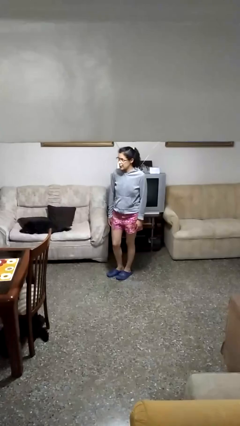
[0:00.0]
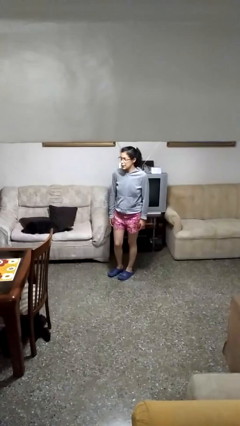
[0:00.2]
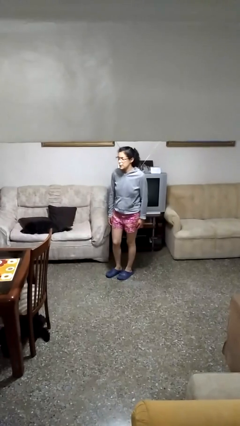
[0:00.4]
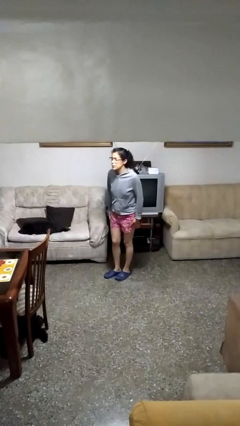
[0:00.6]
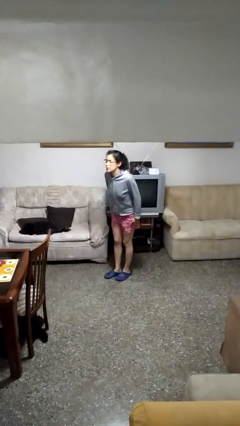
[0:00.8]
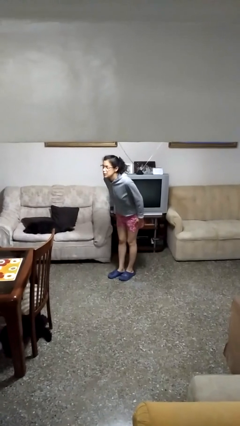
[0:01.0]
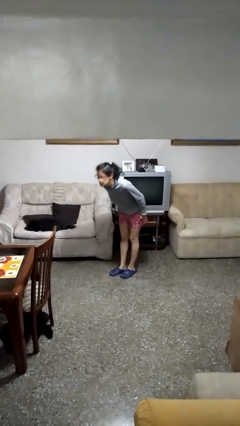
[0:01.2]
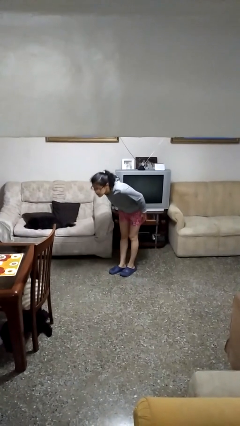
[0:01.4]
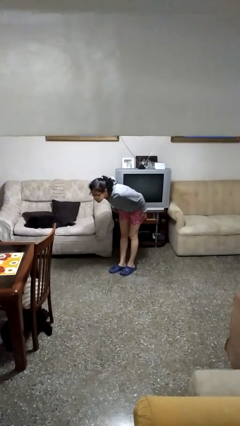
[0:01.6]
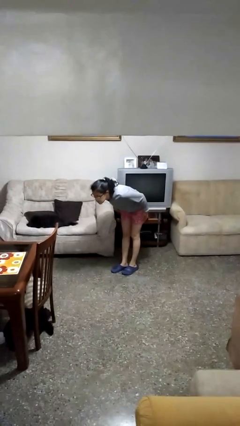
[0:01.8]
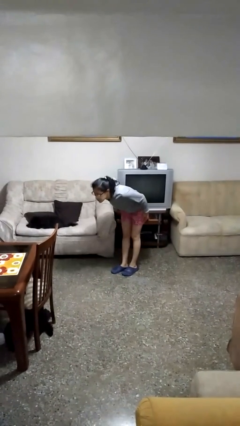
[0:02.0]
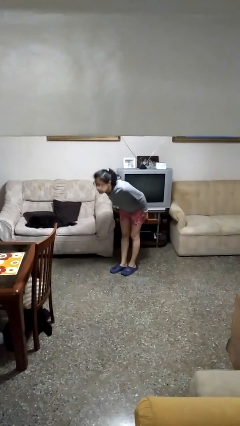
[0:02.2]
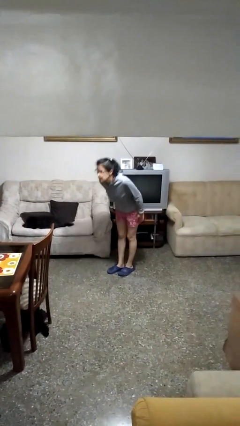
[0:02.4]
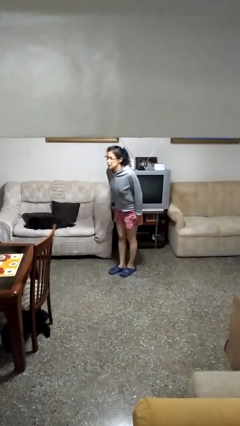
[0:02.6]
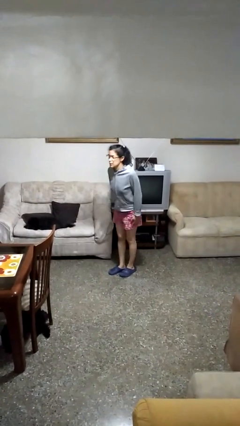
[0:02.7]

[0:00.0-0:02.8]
person bows

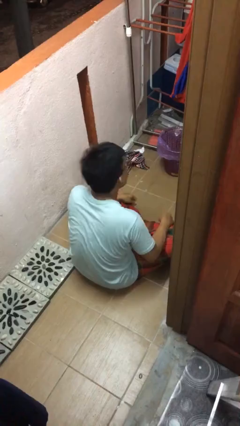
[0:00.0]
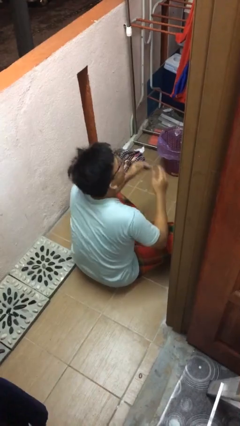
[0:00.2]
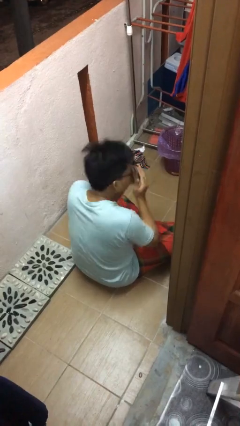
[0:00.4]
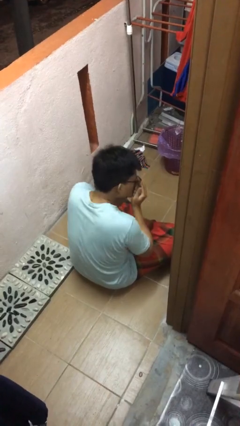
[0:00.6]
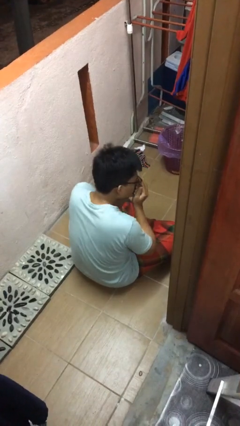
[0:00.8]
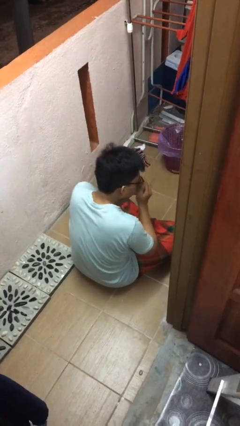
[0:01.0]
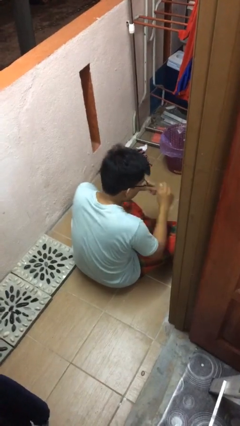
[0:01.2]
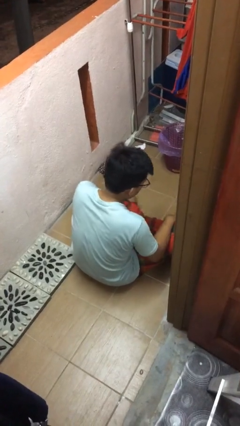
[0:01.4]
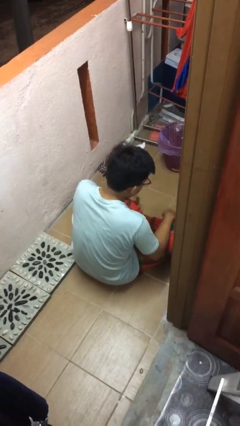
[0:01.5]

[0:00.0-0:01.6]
person sneezes into hand

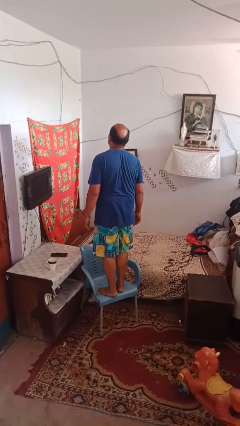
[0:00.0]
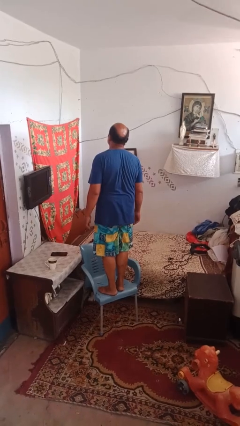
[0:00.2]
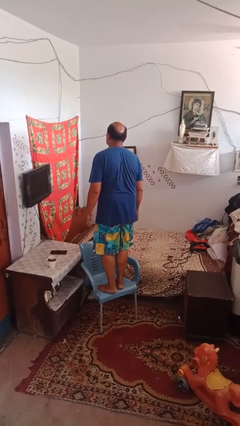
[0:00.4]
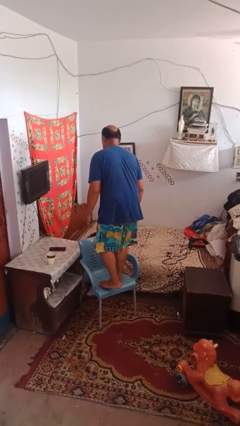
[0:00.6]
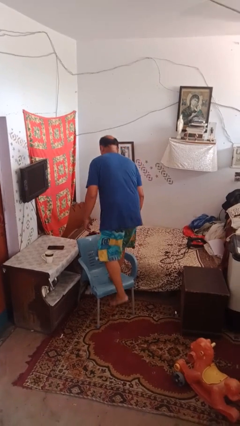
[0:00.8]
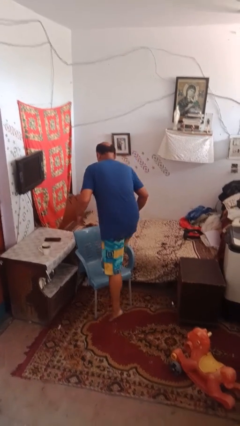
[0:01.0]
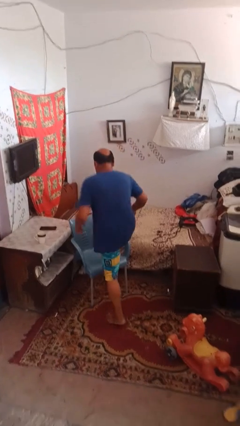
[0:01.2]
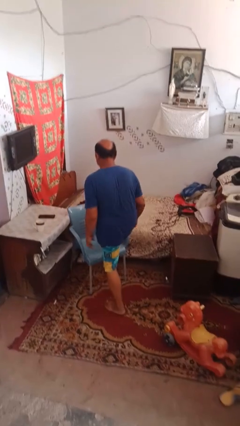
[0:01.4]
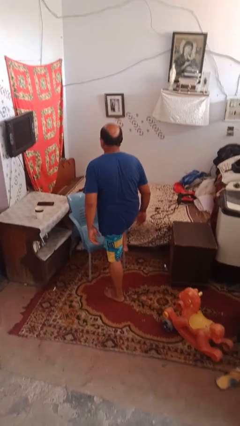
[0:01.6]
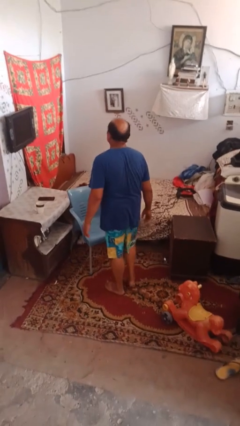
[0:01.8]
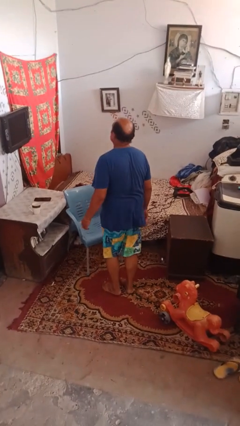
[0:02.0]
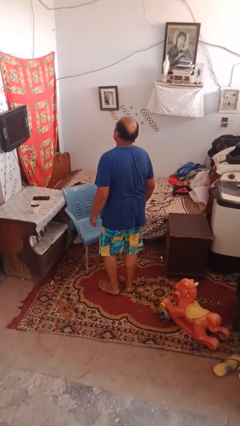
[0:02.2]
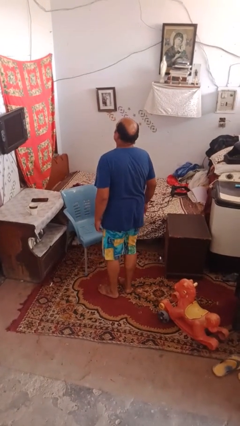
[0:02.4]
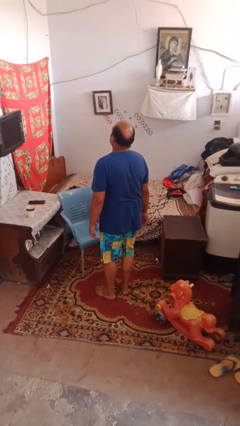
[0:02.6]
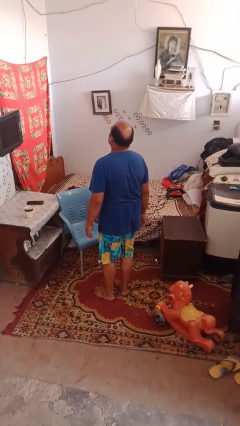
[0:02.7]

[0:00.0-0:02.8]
person climbs off chair

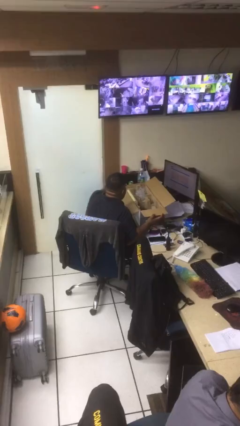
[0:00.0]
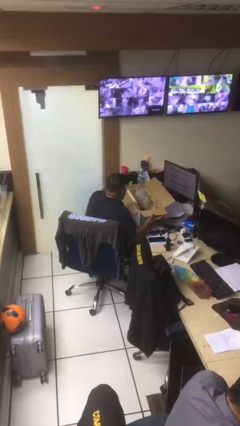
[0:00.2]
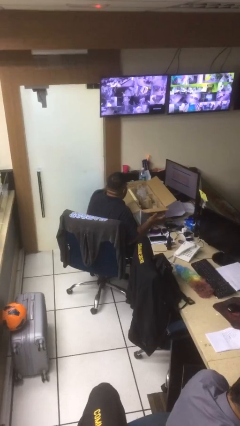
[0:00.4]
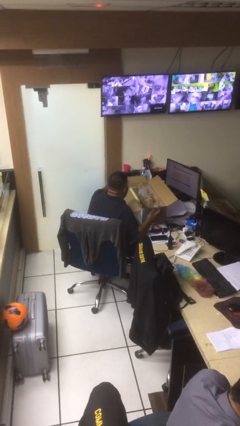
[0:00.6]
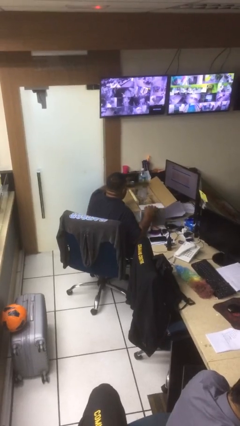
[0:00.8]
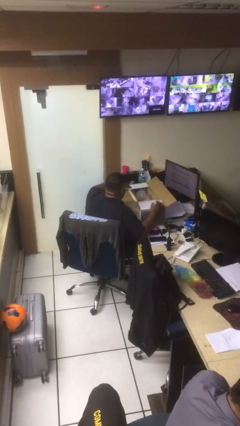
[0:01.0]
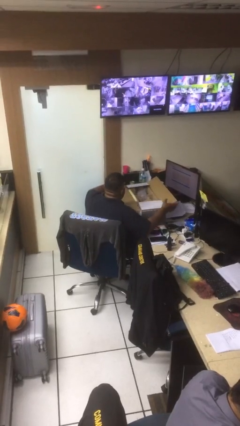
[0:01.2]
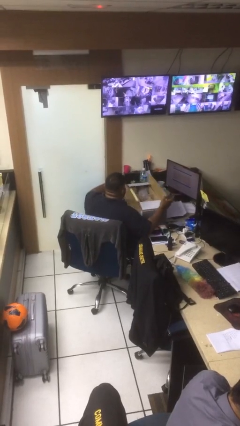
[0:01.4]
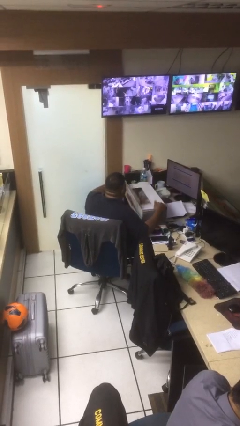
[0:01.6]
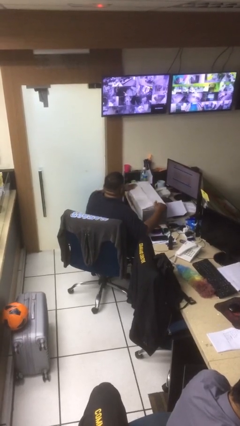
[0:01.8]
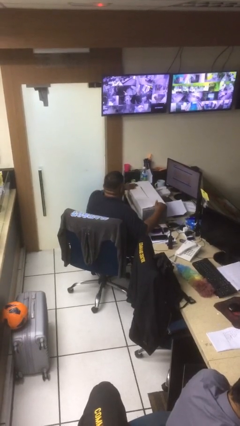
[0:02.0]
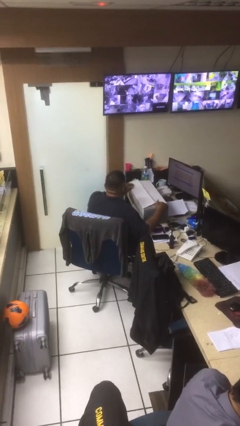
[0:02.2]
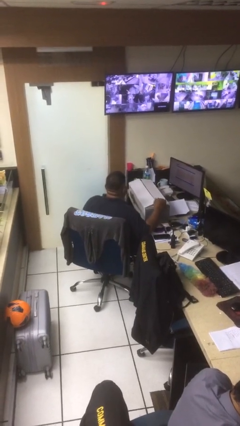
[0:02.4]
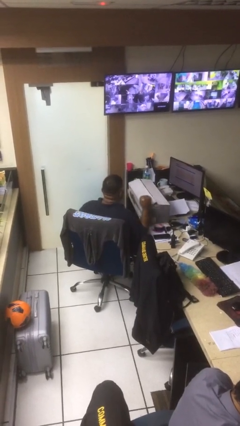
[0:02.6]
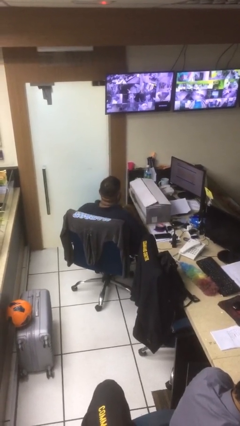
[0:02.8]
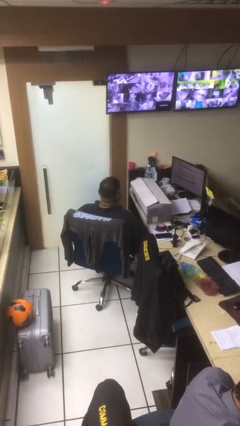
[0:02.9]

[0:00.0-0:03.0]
person closes box

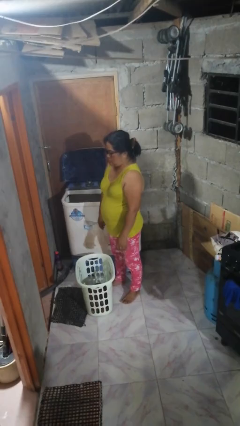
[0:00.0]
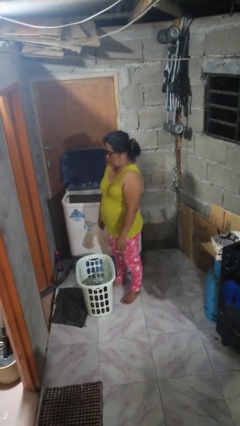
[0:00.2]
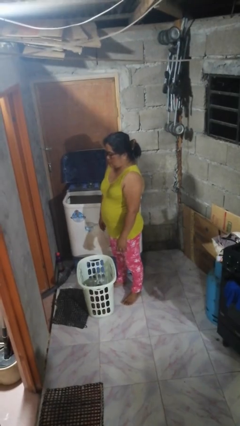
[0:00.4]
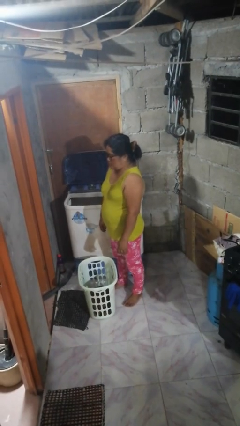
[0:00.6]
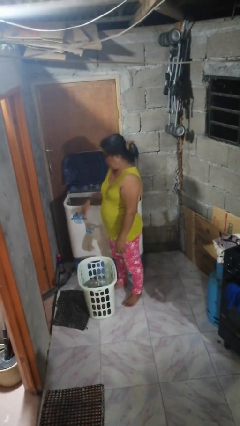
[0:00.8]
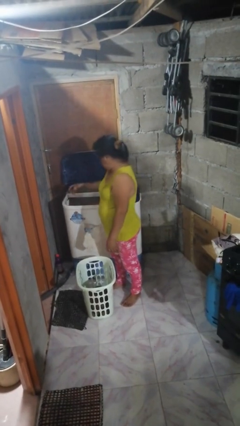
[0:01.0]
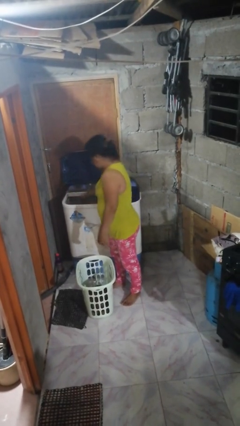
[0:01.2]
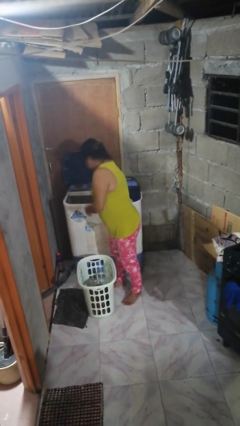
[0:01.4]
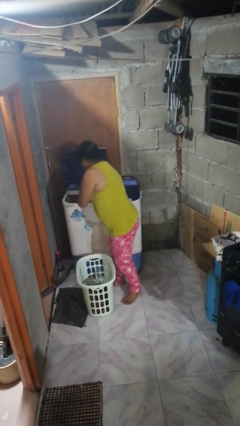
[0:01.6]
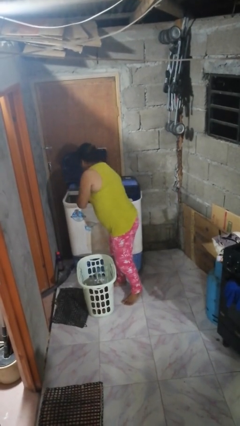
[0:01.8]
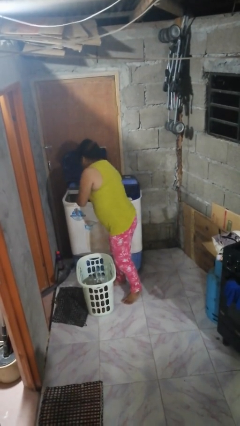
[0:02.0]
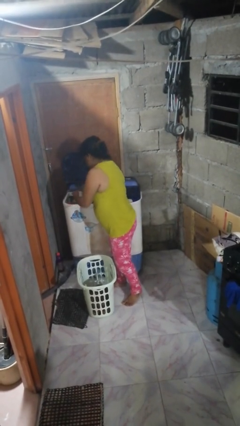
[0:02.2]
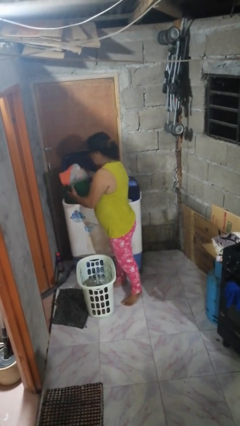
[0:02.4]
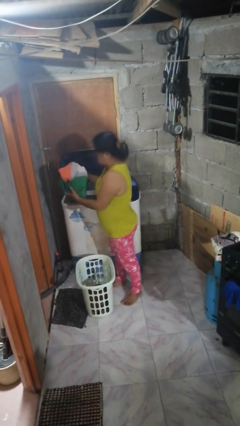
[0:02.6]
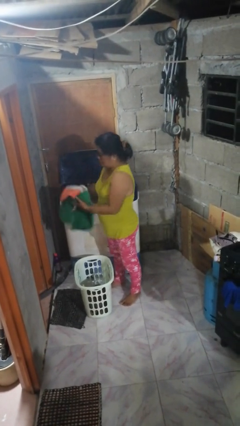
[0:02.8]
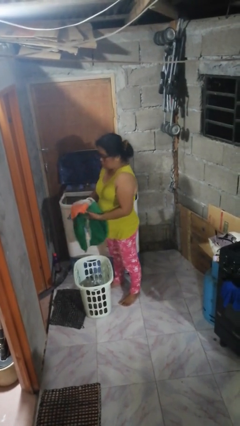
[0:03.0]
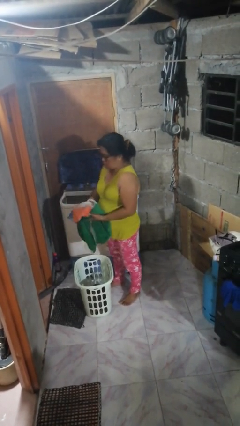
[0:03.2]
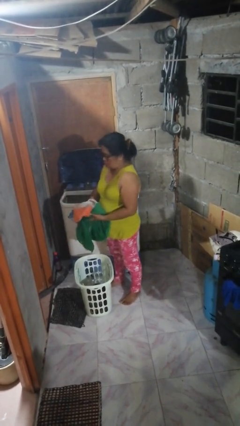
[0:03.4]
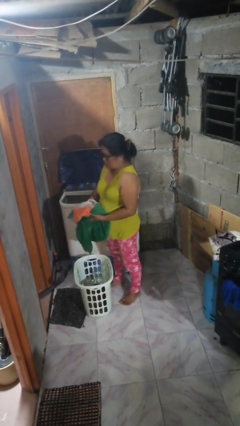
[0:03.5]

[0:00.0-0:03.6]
person unloads clotheswasher

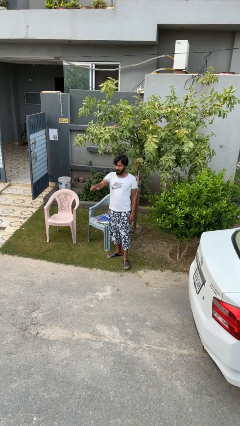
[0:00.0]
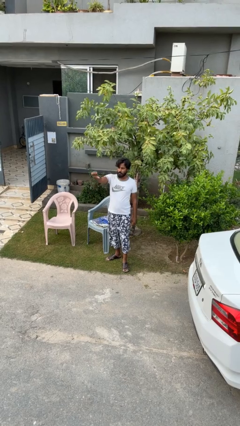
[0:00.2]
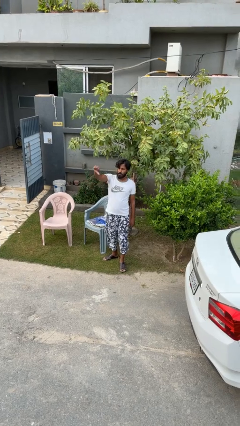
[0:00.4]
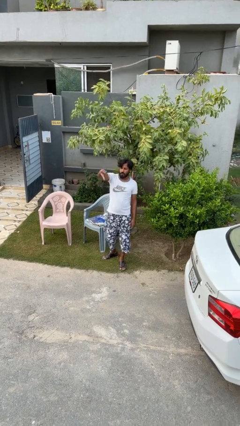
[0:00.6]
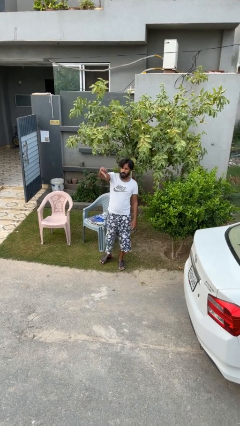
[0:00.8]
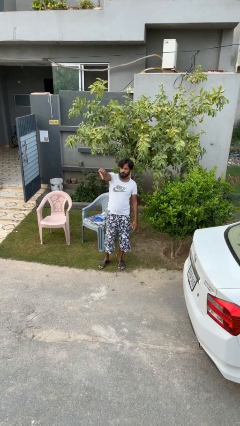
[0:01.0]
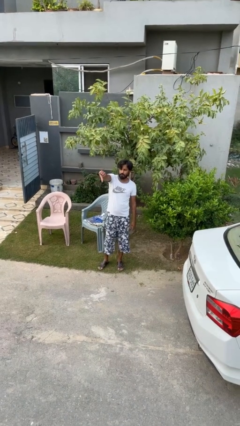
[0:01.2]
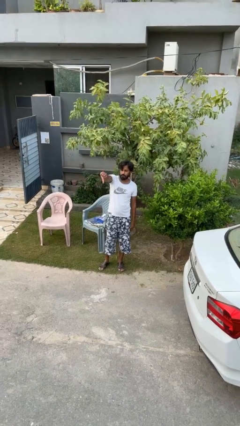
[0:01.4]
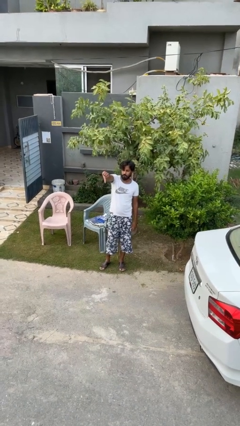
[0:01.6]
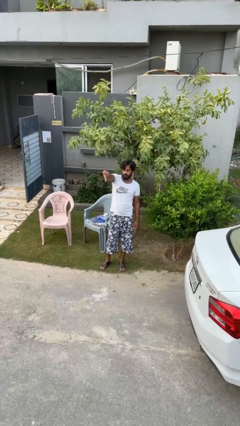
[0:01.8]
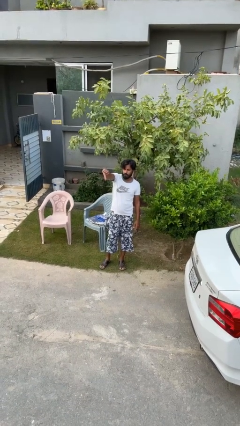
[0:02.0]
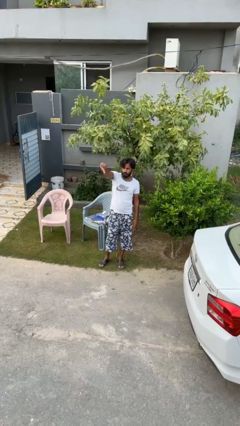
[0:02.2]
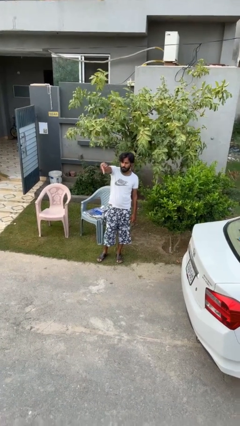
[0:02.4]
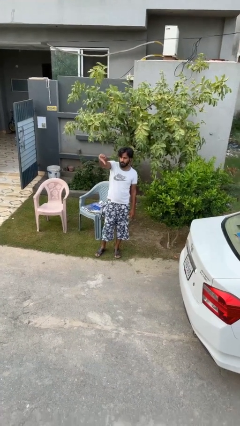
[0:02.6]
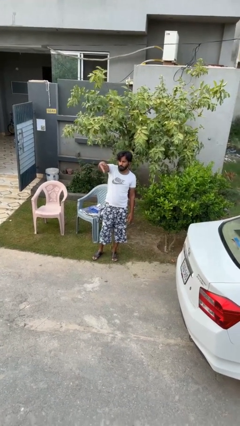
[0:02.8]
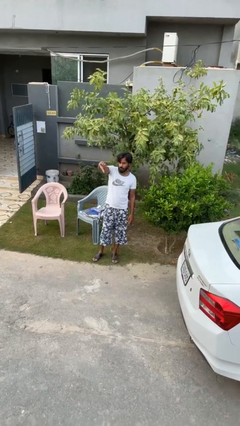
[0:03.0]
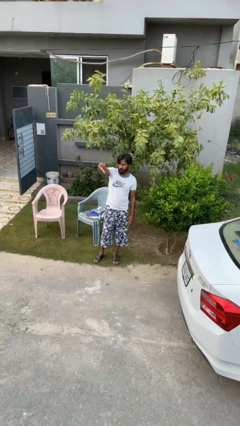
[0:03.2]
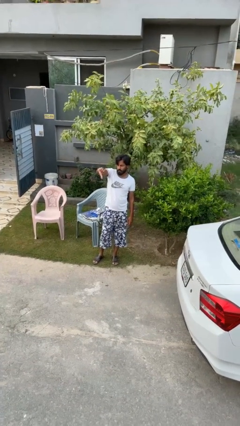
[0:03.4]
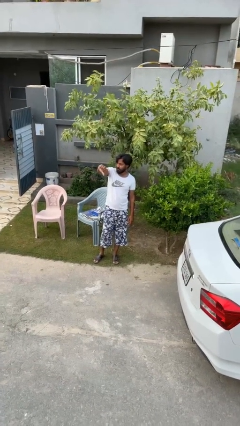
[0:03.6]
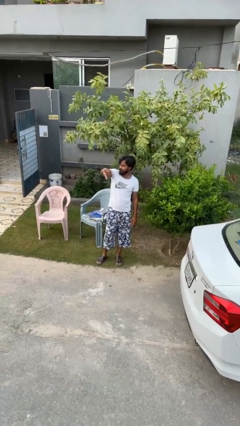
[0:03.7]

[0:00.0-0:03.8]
person gestures thumbs down
